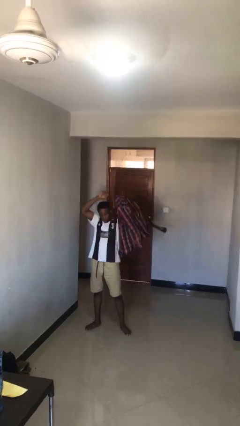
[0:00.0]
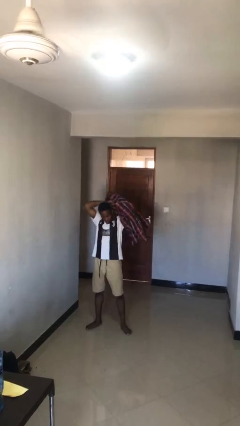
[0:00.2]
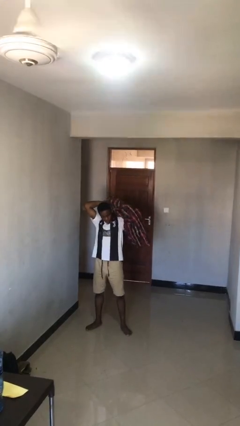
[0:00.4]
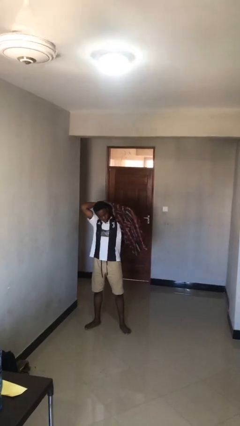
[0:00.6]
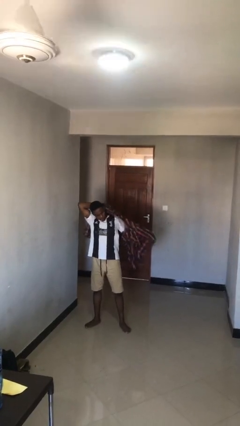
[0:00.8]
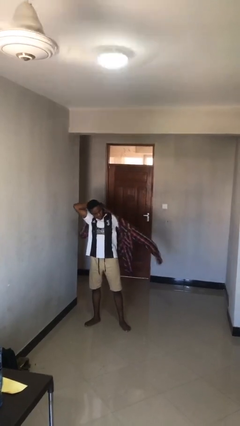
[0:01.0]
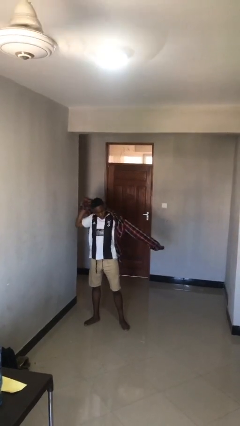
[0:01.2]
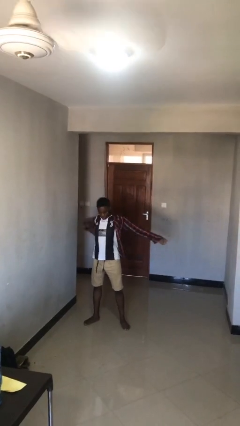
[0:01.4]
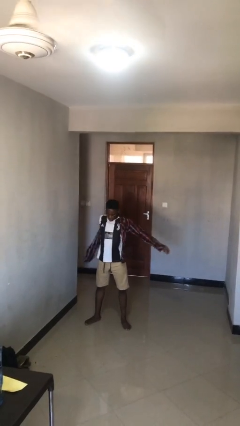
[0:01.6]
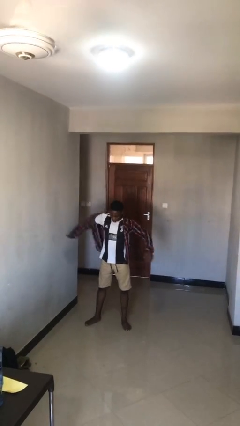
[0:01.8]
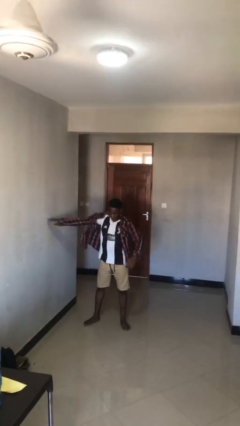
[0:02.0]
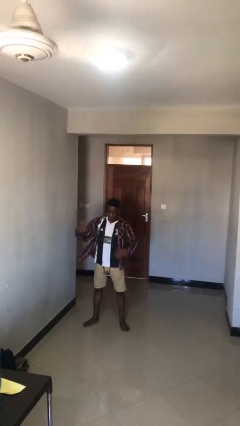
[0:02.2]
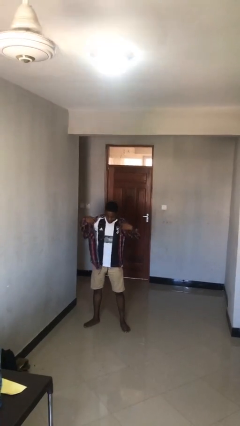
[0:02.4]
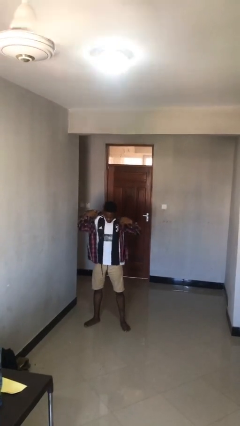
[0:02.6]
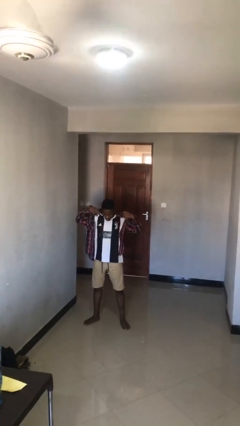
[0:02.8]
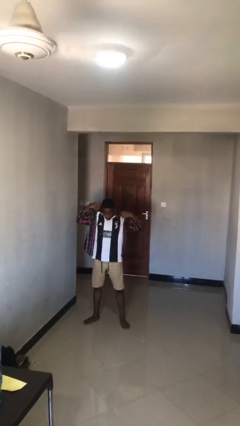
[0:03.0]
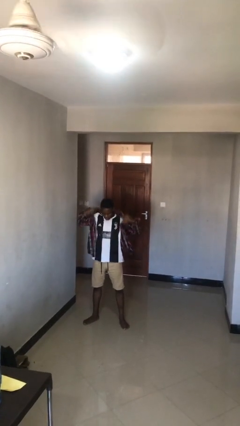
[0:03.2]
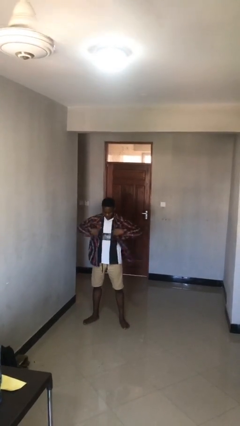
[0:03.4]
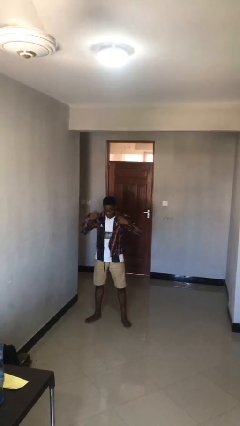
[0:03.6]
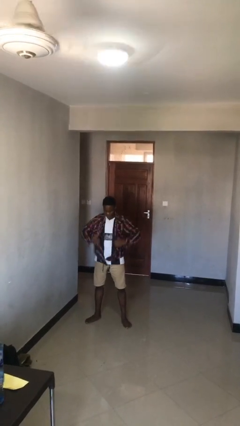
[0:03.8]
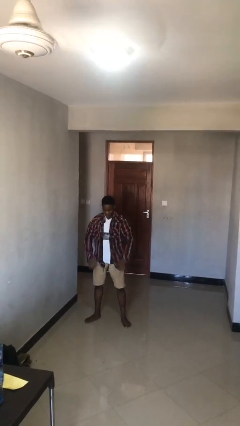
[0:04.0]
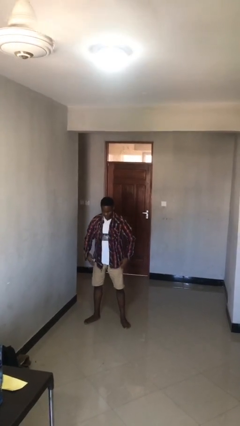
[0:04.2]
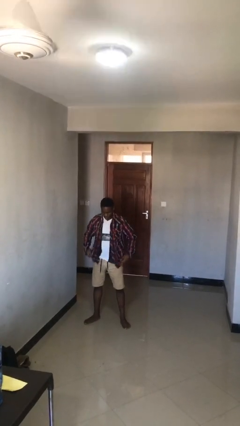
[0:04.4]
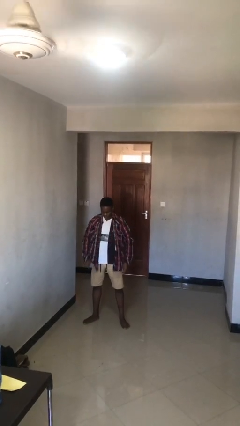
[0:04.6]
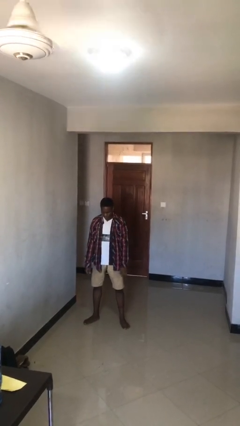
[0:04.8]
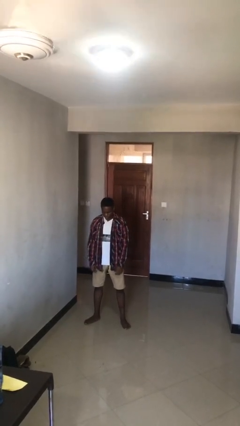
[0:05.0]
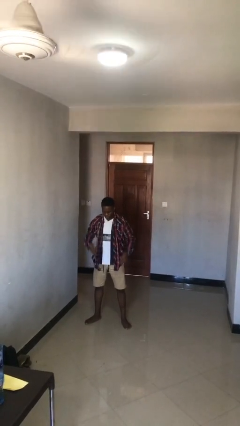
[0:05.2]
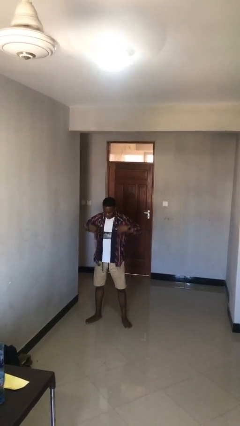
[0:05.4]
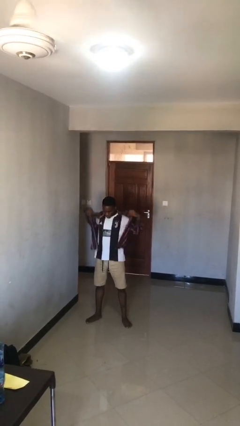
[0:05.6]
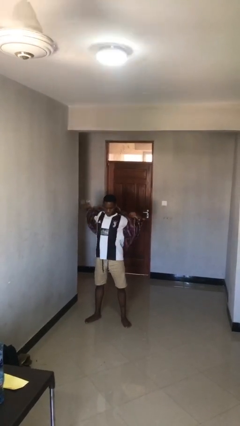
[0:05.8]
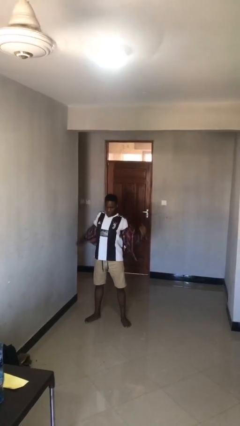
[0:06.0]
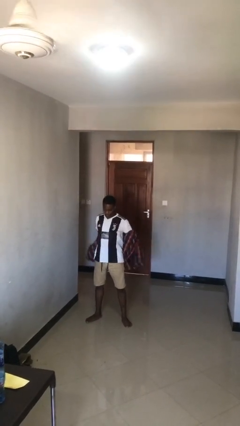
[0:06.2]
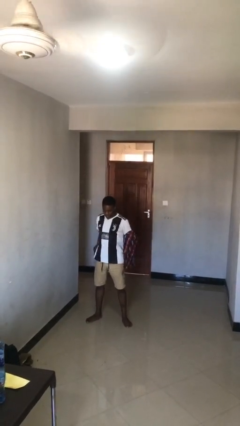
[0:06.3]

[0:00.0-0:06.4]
person puts on shirt

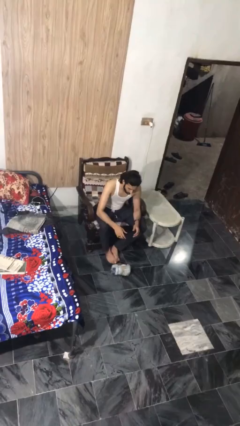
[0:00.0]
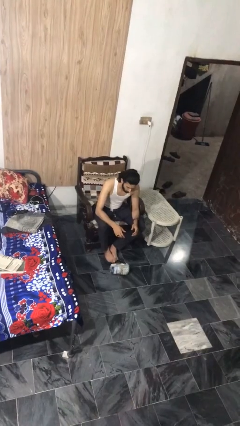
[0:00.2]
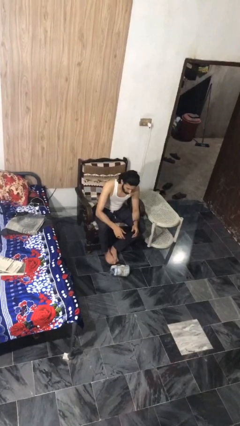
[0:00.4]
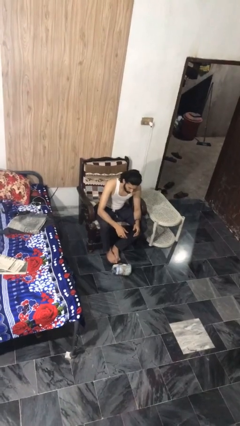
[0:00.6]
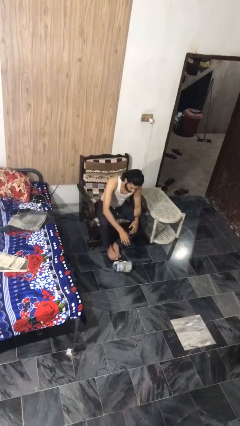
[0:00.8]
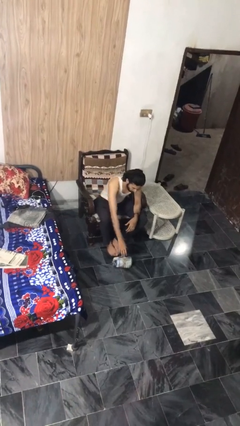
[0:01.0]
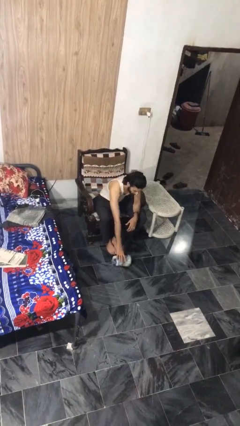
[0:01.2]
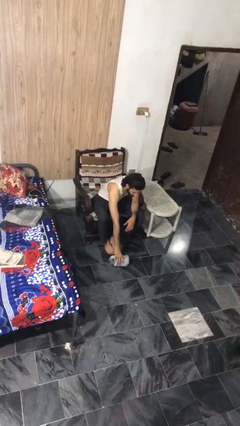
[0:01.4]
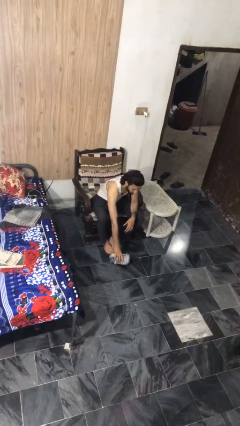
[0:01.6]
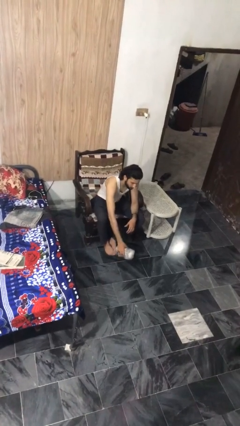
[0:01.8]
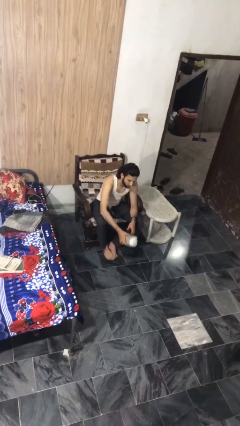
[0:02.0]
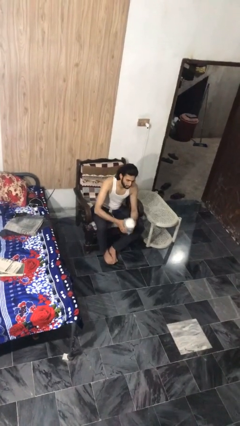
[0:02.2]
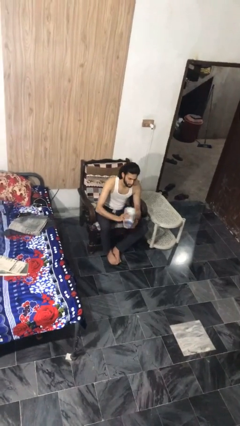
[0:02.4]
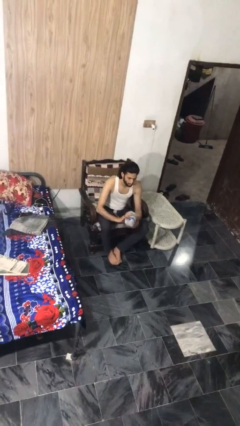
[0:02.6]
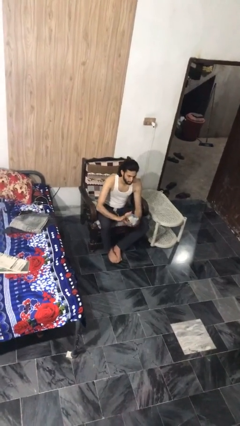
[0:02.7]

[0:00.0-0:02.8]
person picks up object from floor

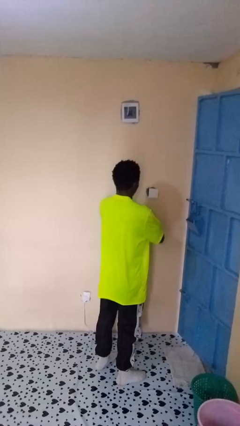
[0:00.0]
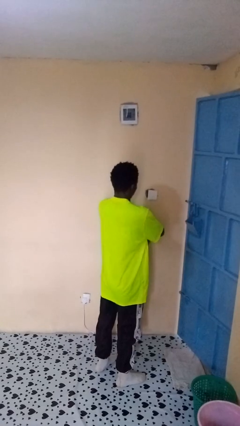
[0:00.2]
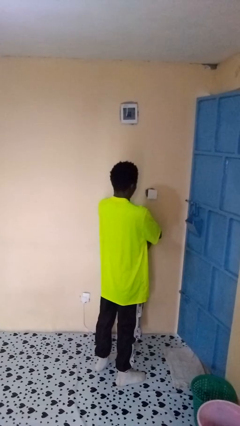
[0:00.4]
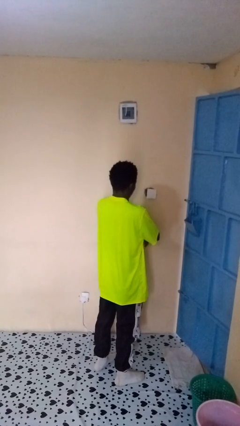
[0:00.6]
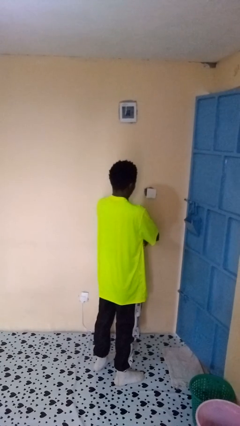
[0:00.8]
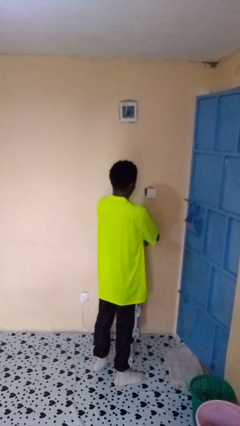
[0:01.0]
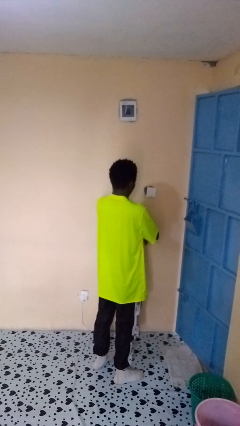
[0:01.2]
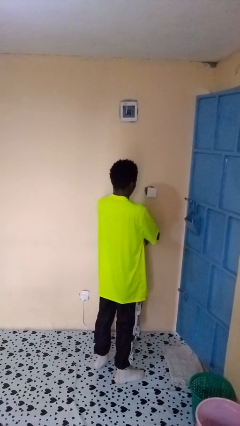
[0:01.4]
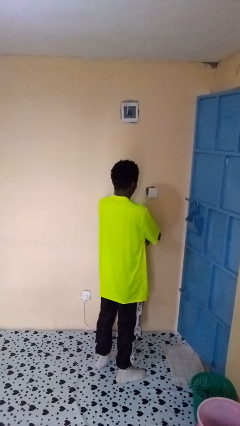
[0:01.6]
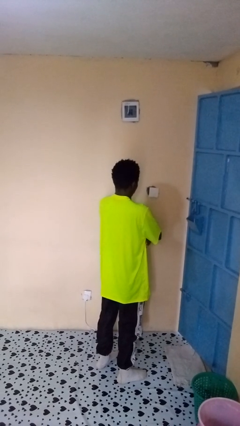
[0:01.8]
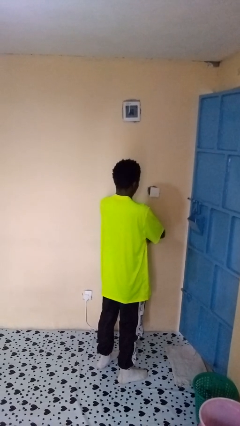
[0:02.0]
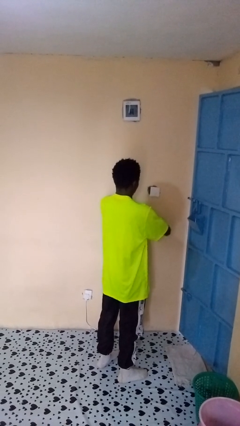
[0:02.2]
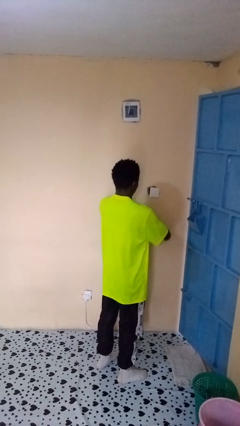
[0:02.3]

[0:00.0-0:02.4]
person crosses arms

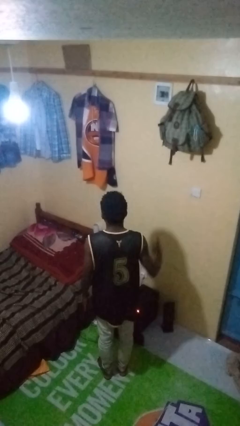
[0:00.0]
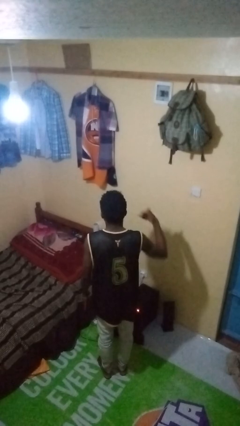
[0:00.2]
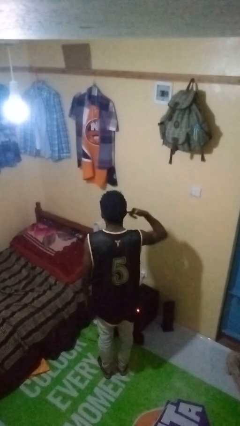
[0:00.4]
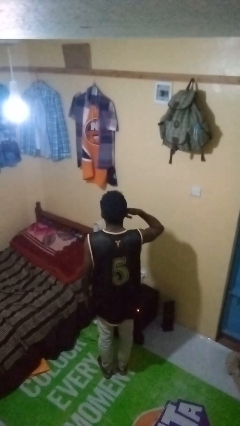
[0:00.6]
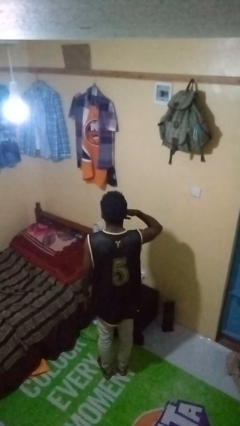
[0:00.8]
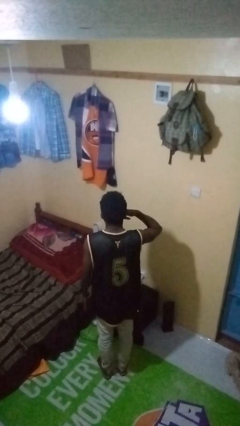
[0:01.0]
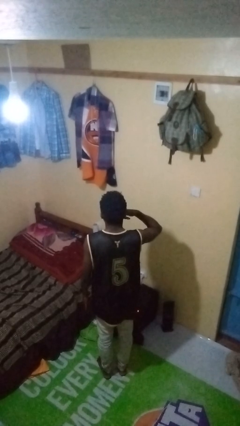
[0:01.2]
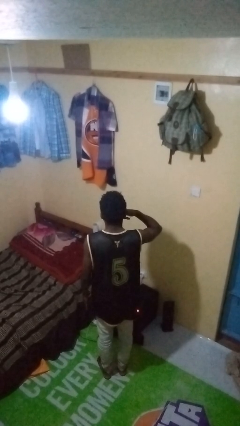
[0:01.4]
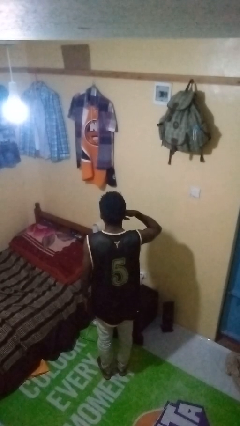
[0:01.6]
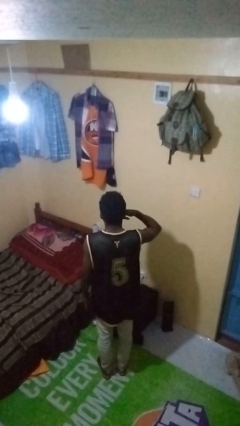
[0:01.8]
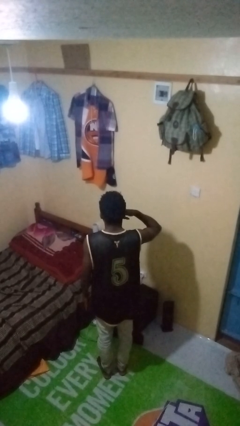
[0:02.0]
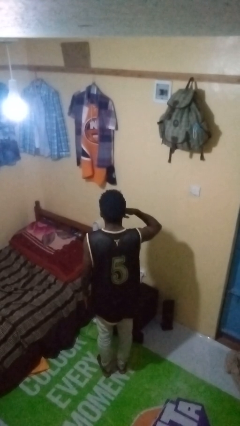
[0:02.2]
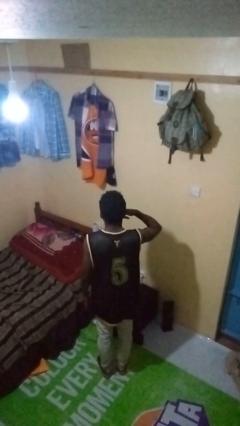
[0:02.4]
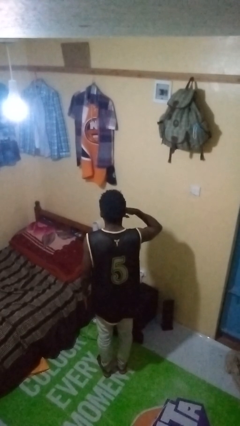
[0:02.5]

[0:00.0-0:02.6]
person gestures call me

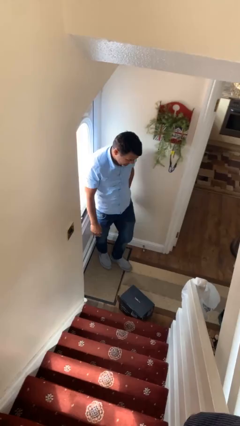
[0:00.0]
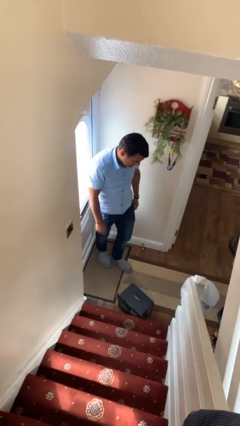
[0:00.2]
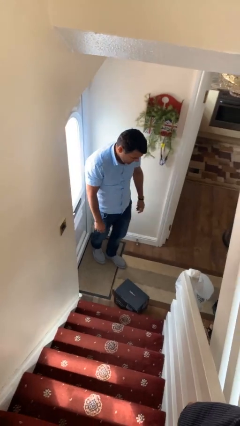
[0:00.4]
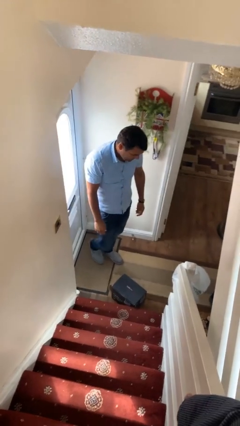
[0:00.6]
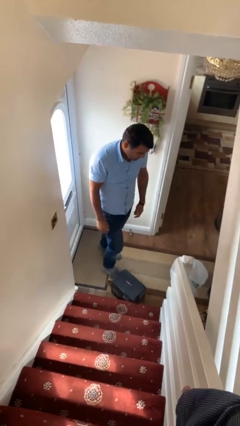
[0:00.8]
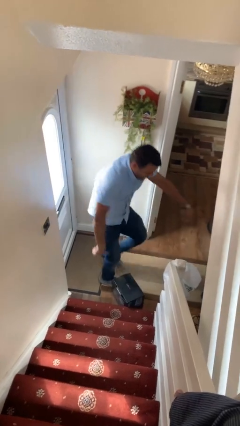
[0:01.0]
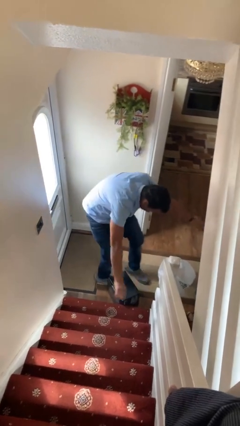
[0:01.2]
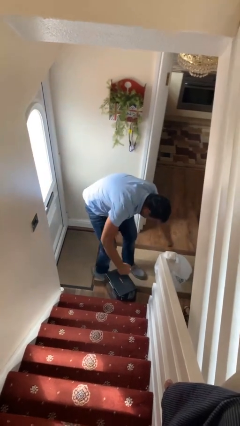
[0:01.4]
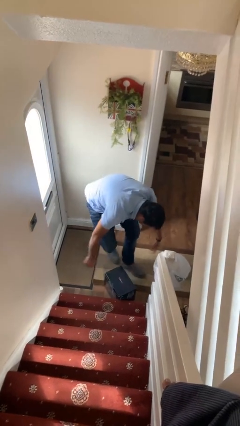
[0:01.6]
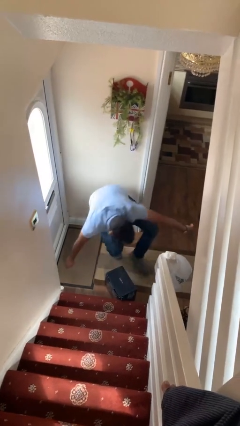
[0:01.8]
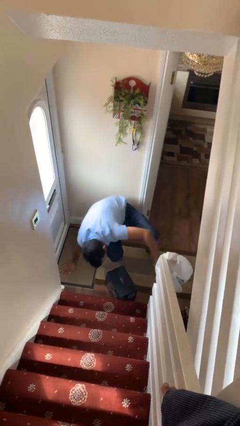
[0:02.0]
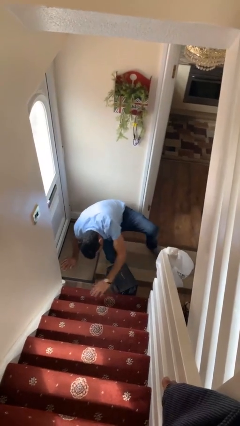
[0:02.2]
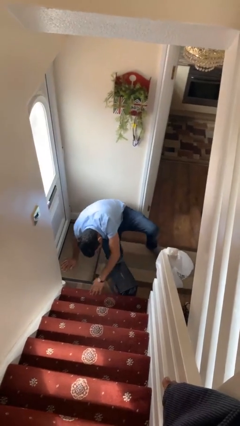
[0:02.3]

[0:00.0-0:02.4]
person trips on object on floor

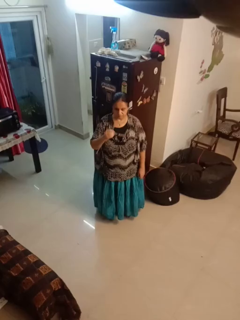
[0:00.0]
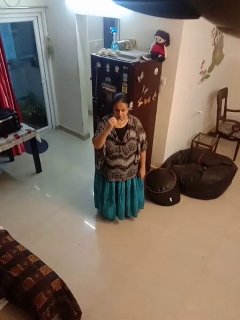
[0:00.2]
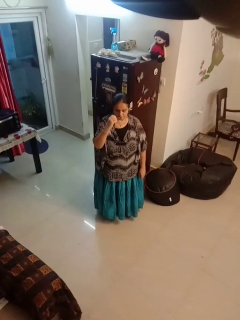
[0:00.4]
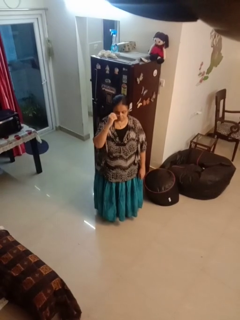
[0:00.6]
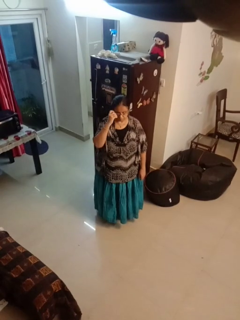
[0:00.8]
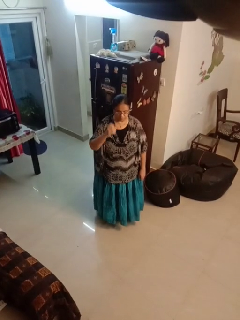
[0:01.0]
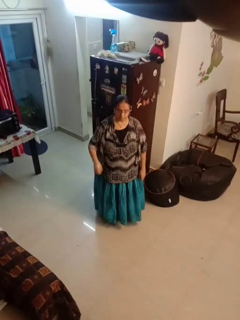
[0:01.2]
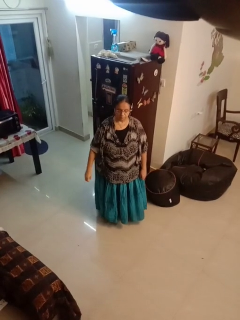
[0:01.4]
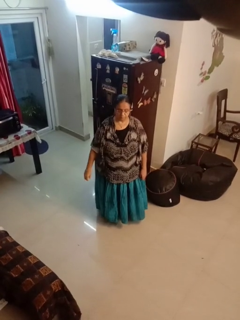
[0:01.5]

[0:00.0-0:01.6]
person puts on glasses
